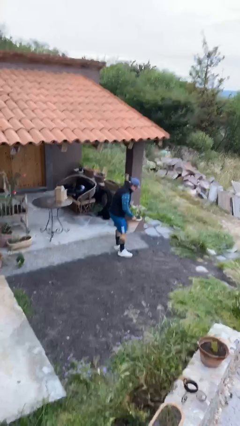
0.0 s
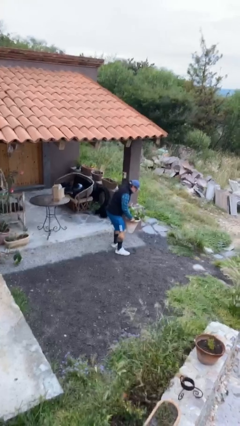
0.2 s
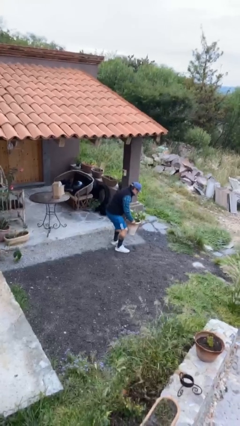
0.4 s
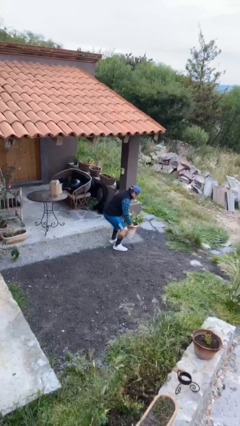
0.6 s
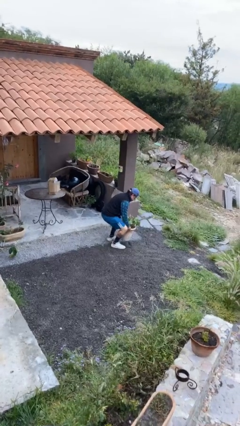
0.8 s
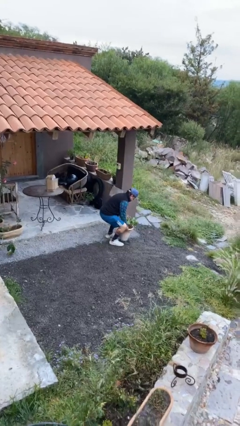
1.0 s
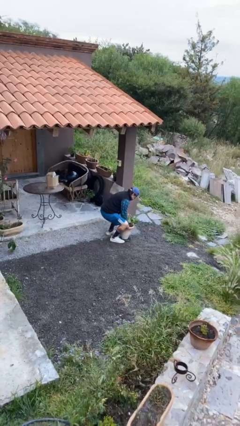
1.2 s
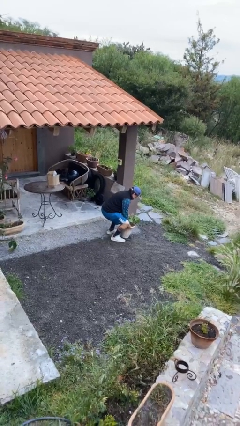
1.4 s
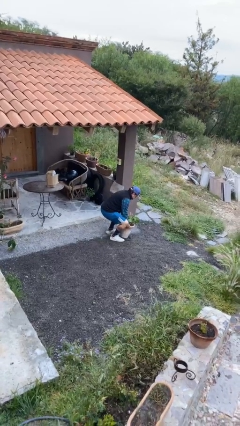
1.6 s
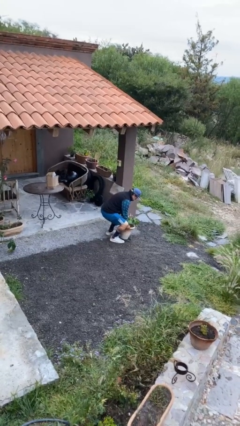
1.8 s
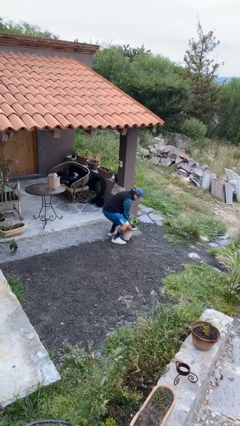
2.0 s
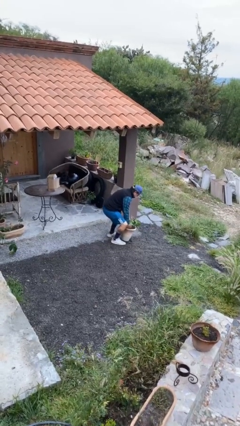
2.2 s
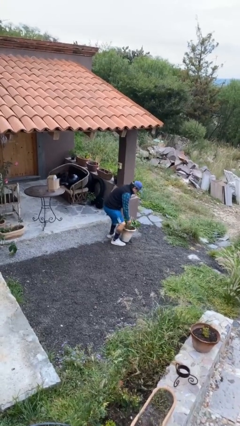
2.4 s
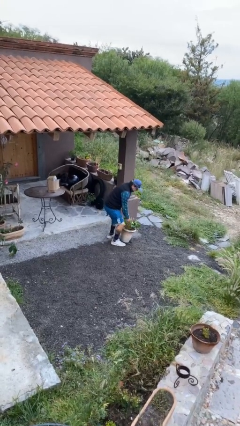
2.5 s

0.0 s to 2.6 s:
person puts down object on floor

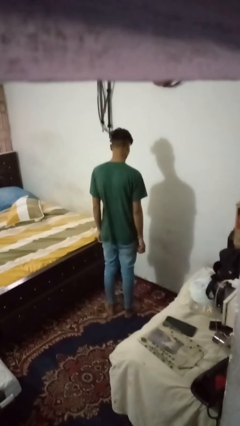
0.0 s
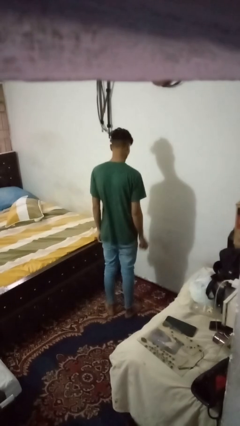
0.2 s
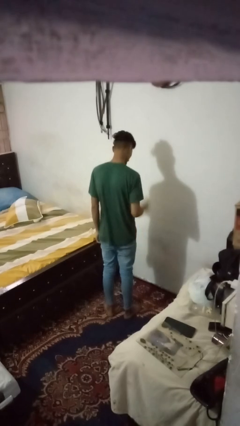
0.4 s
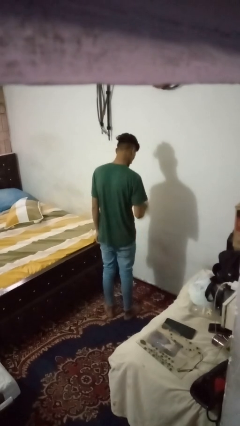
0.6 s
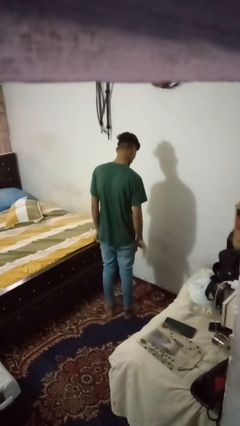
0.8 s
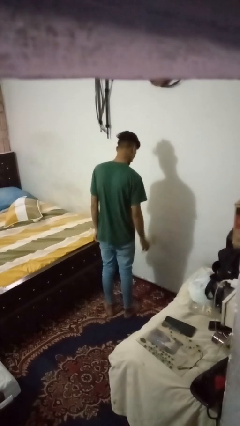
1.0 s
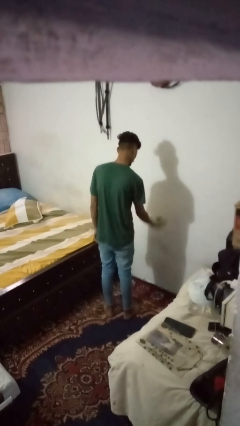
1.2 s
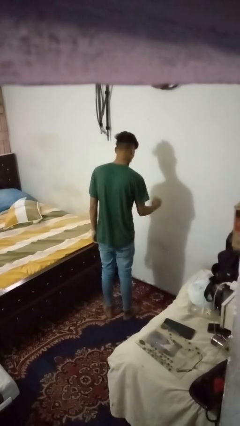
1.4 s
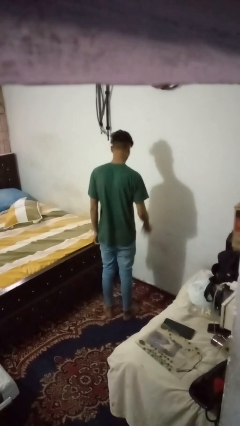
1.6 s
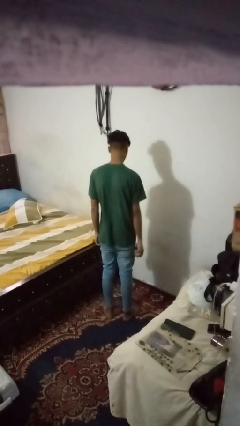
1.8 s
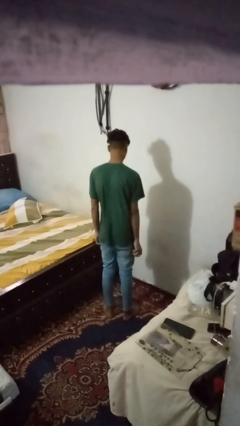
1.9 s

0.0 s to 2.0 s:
person bounces ball on floor

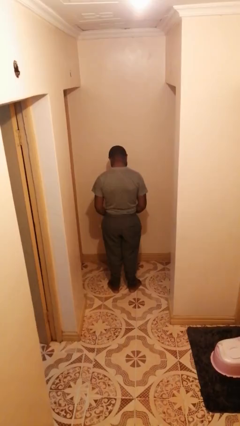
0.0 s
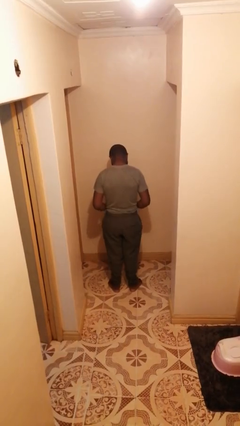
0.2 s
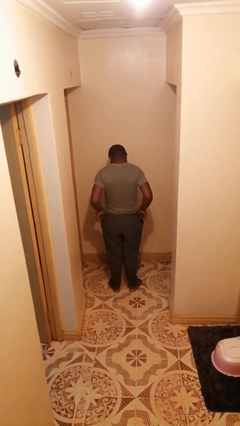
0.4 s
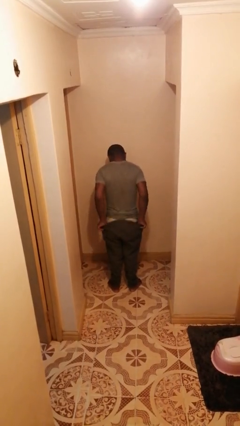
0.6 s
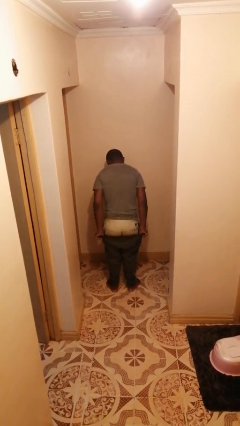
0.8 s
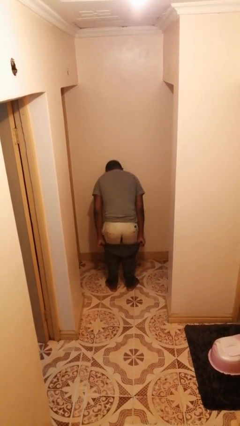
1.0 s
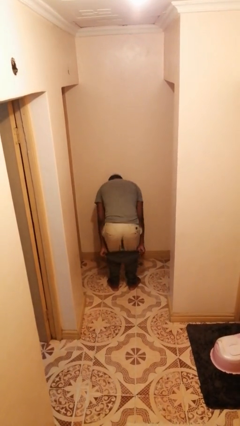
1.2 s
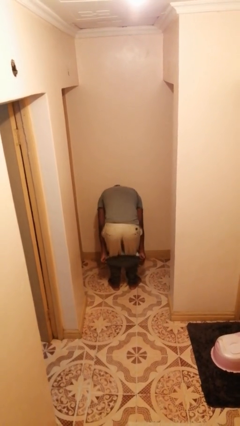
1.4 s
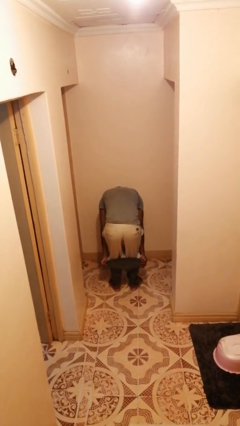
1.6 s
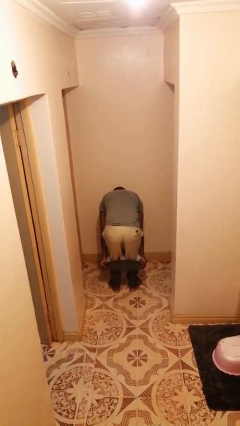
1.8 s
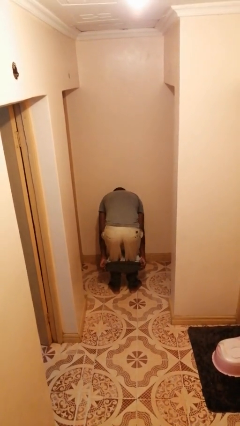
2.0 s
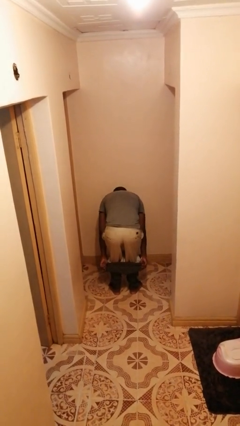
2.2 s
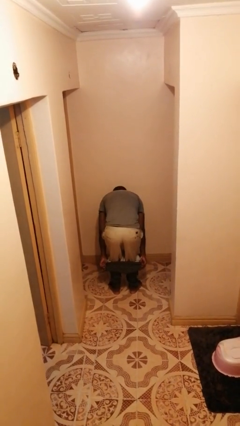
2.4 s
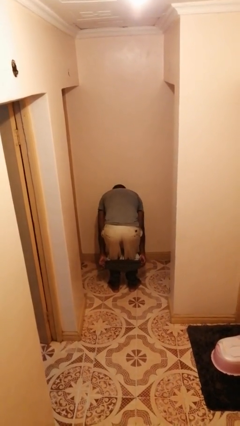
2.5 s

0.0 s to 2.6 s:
person takes off pants

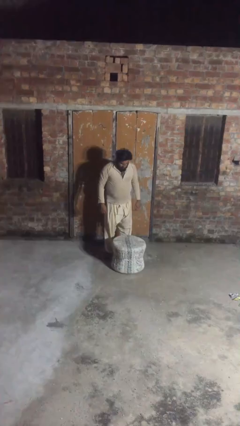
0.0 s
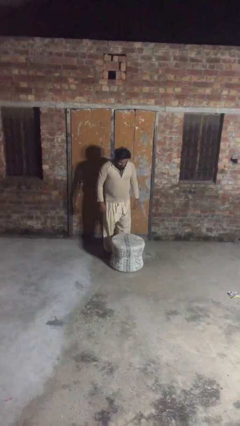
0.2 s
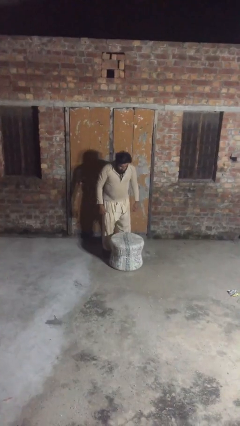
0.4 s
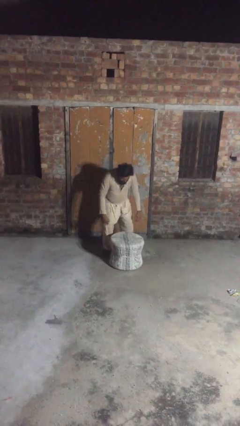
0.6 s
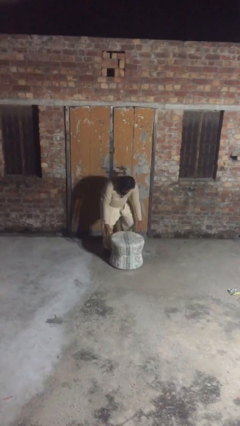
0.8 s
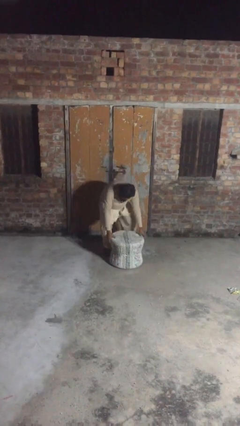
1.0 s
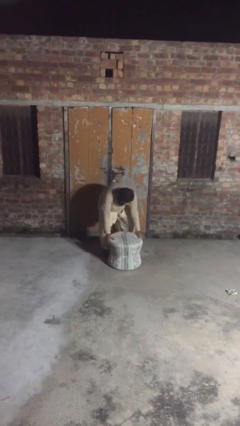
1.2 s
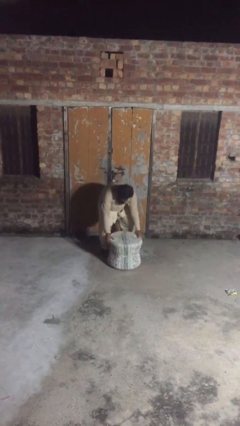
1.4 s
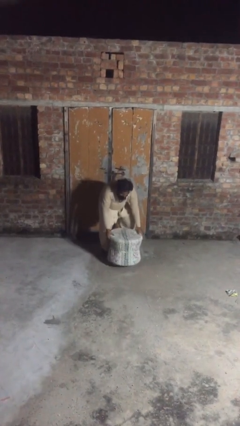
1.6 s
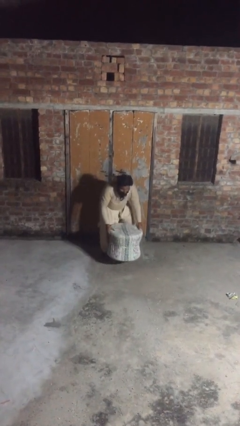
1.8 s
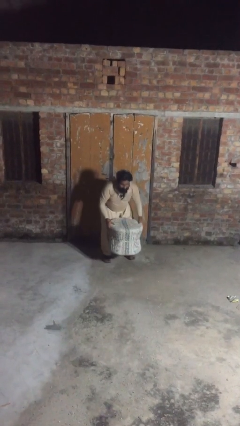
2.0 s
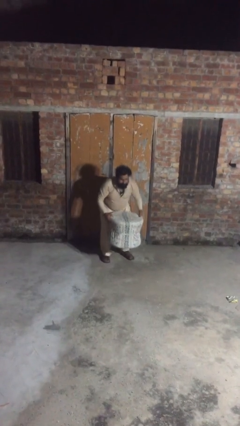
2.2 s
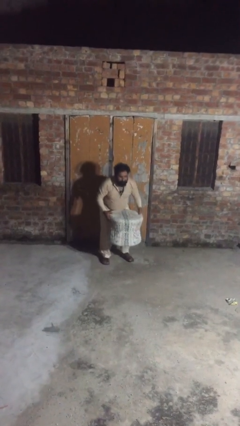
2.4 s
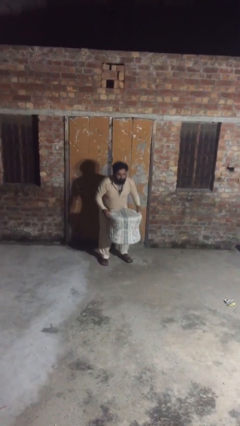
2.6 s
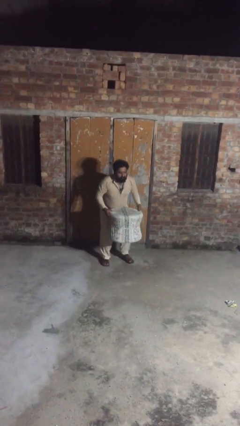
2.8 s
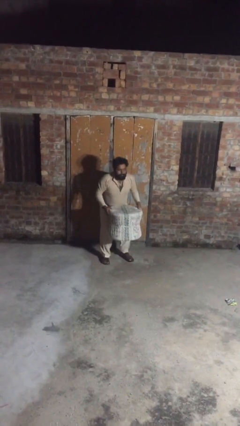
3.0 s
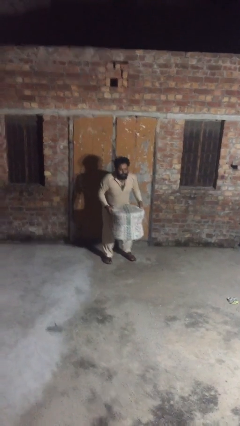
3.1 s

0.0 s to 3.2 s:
person picks up object from floor

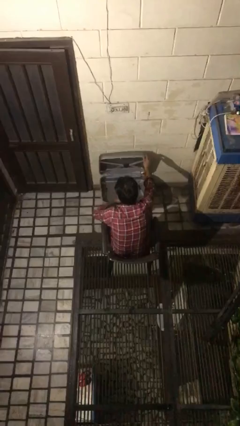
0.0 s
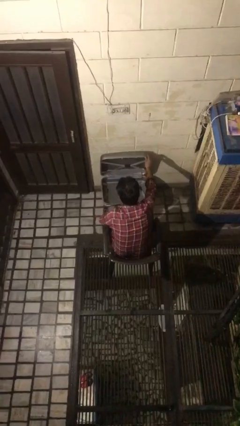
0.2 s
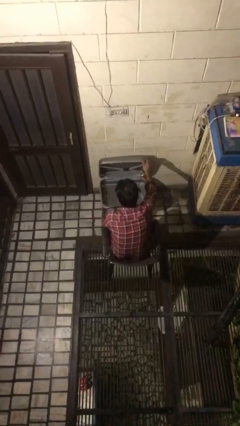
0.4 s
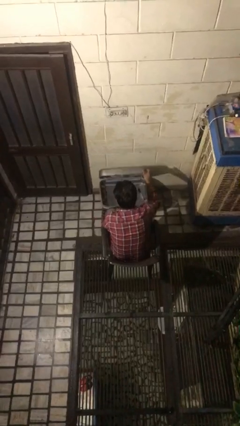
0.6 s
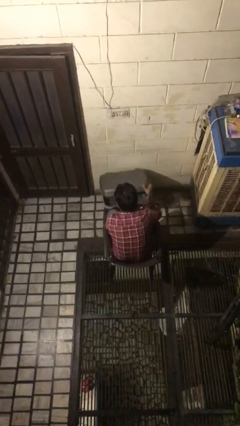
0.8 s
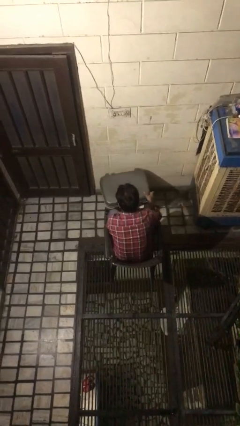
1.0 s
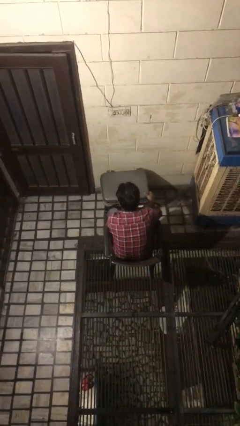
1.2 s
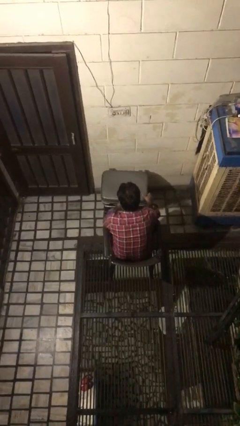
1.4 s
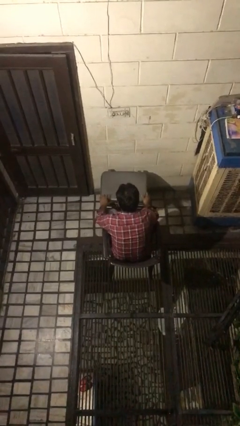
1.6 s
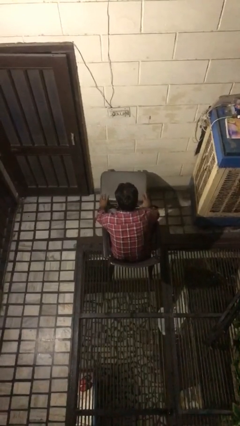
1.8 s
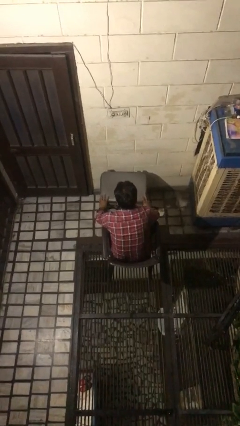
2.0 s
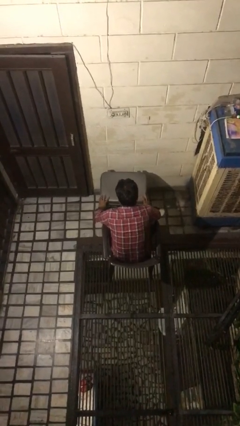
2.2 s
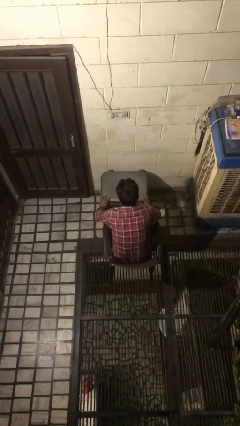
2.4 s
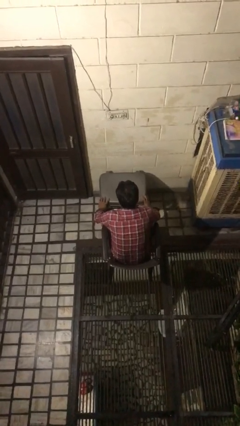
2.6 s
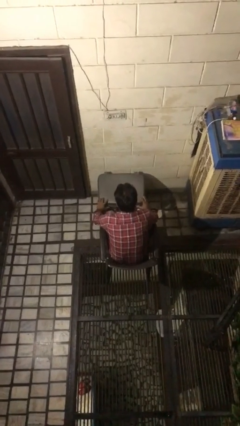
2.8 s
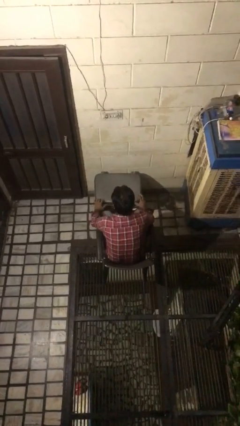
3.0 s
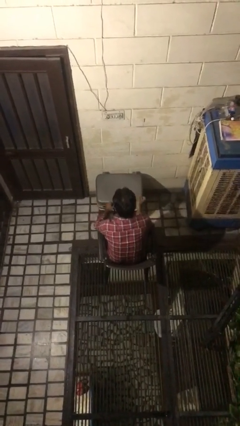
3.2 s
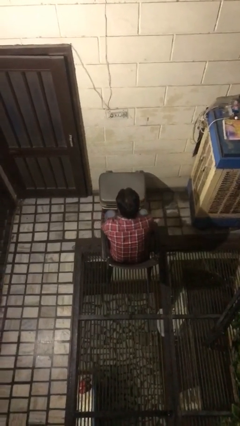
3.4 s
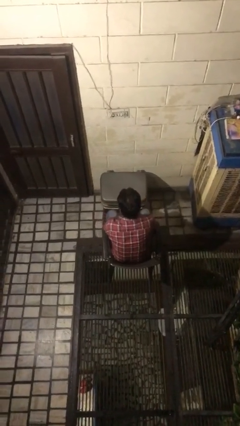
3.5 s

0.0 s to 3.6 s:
person closes suitcase

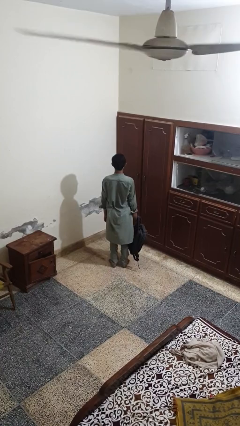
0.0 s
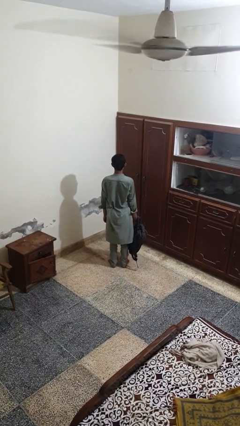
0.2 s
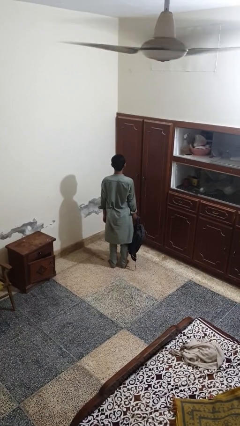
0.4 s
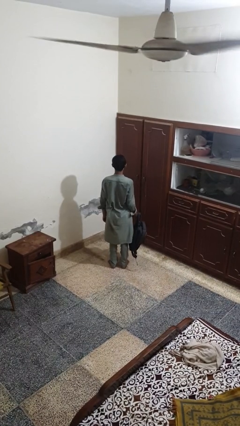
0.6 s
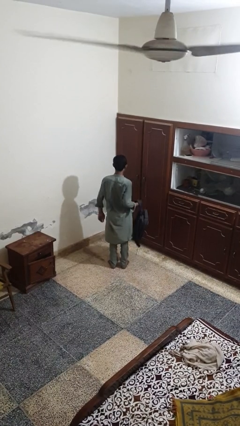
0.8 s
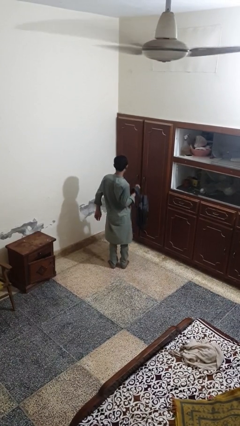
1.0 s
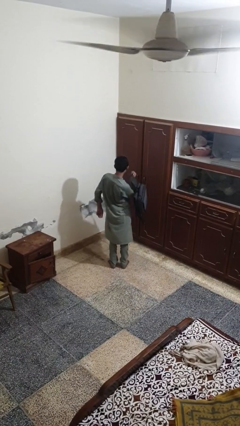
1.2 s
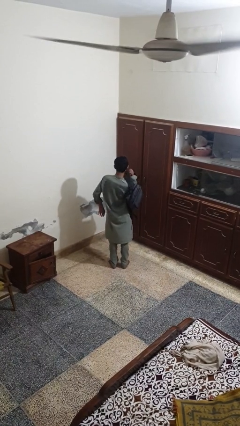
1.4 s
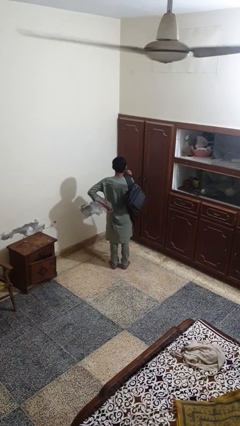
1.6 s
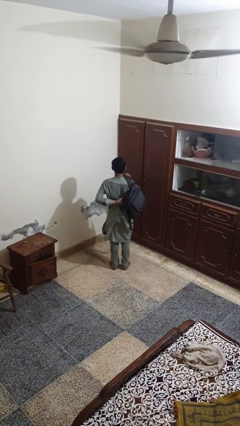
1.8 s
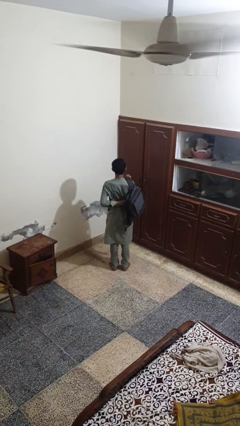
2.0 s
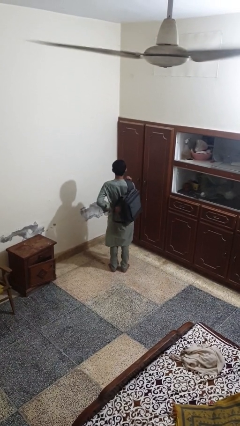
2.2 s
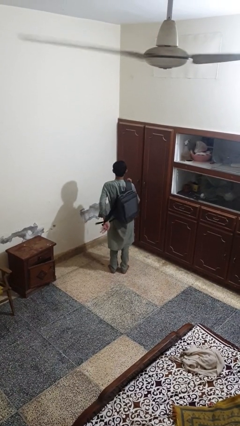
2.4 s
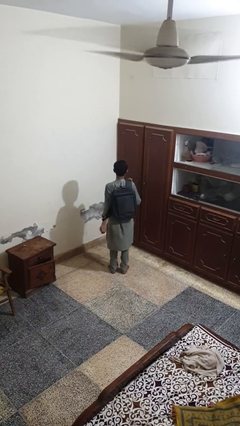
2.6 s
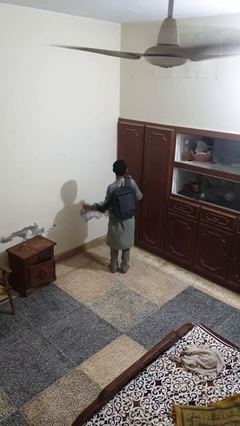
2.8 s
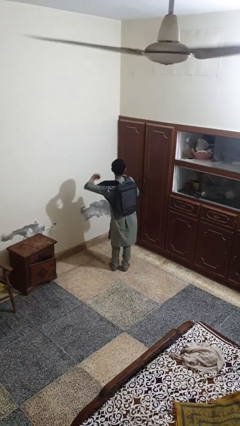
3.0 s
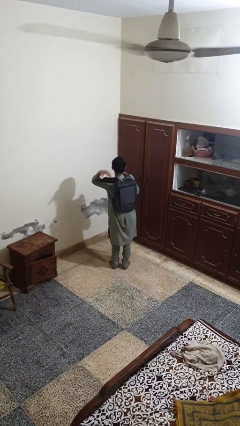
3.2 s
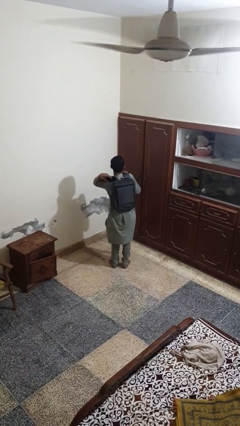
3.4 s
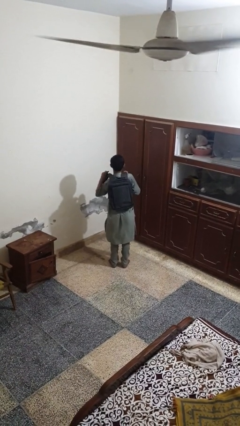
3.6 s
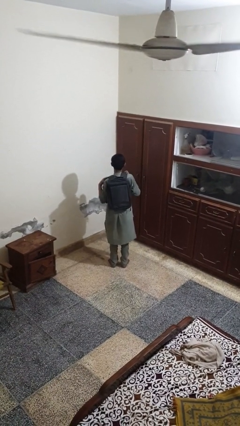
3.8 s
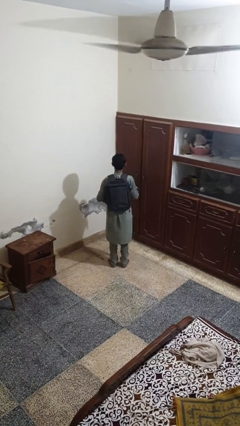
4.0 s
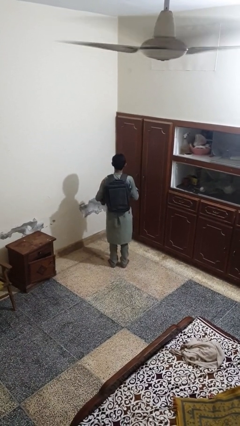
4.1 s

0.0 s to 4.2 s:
person puts on backpack
